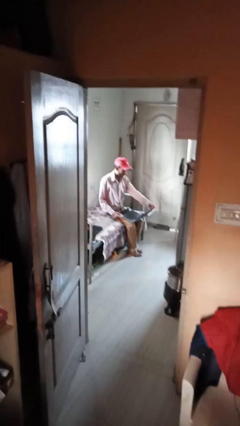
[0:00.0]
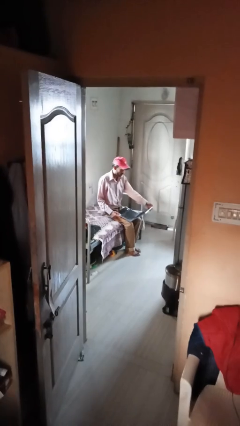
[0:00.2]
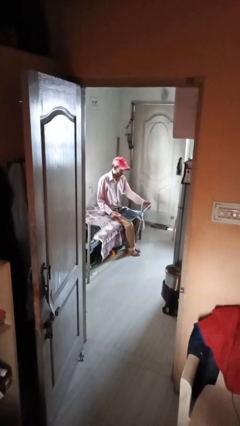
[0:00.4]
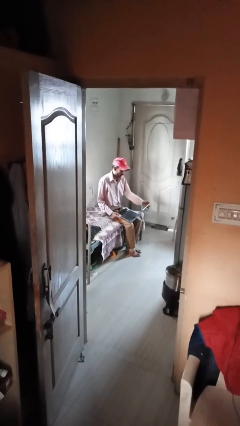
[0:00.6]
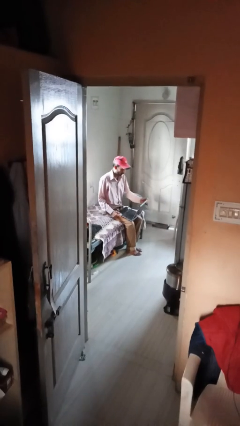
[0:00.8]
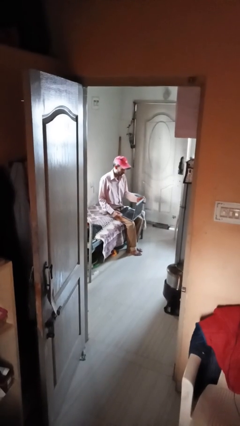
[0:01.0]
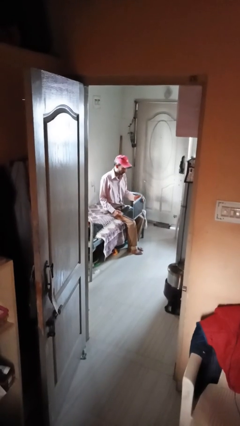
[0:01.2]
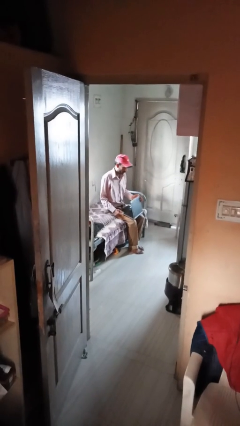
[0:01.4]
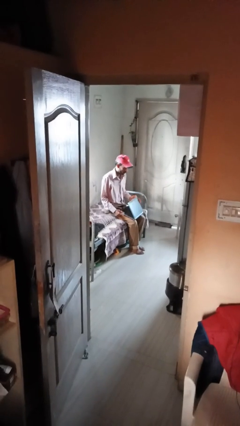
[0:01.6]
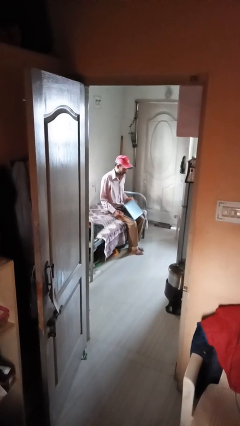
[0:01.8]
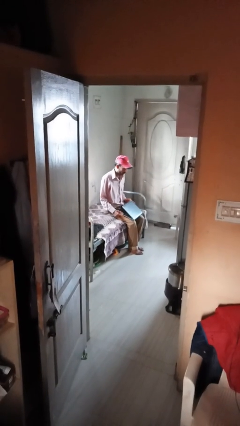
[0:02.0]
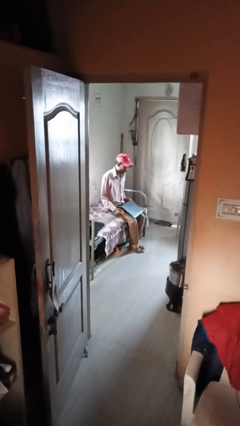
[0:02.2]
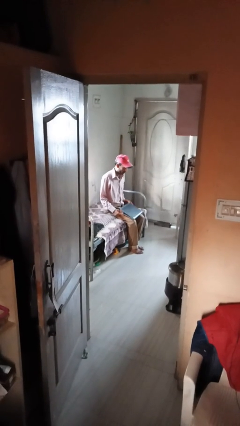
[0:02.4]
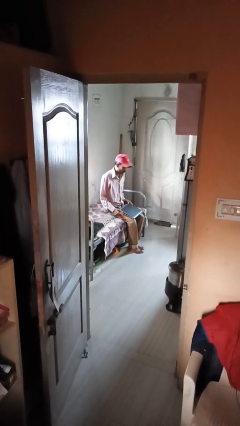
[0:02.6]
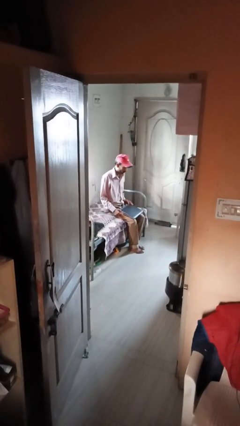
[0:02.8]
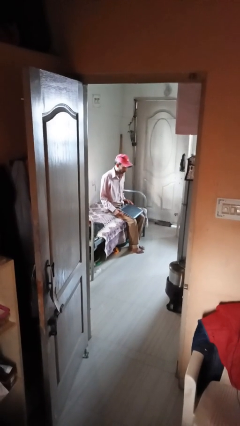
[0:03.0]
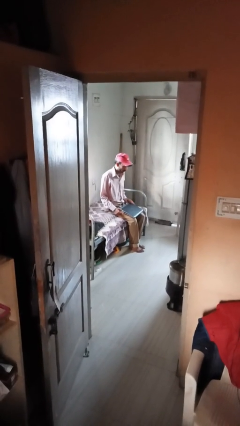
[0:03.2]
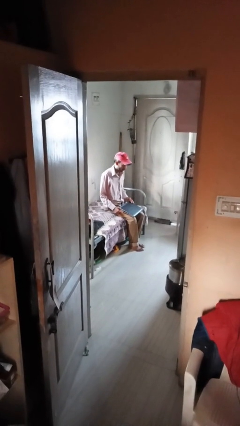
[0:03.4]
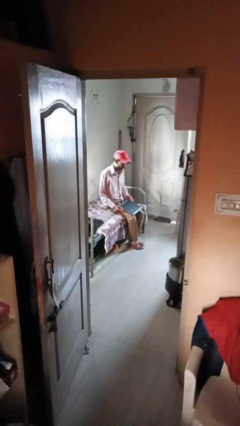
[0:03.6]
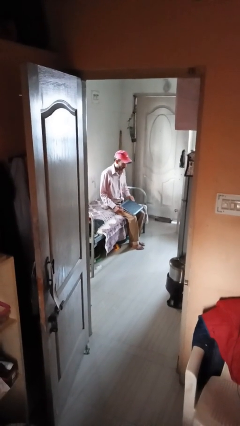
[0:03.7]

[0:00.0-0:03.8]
person closes laptop

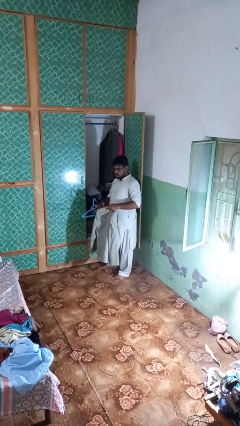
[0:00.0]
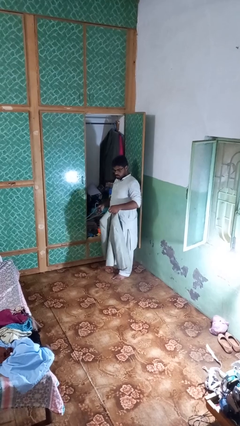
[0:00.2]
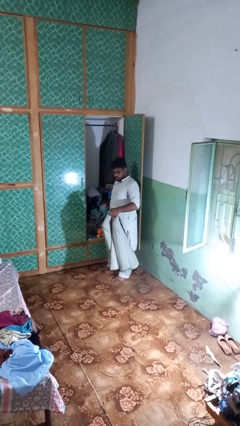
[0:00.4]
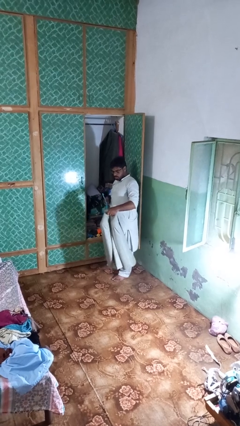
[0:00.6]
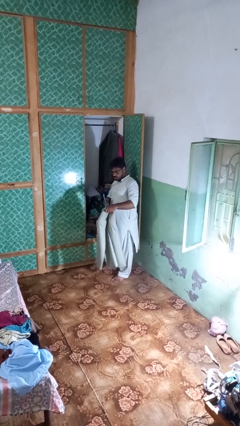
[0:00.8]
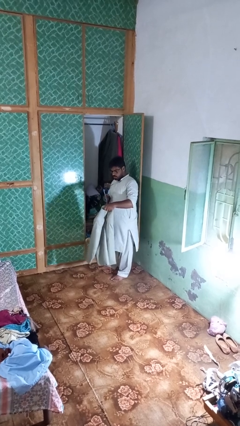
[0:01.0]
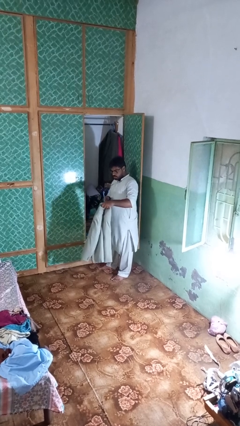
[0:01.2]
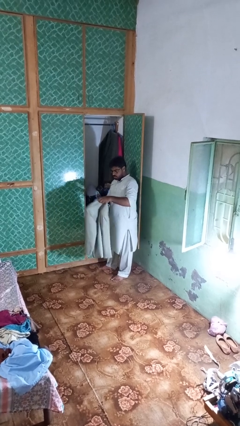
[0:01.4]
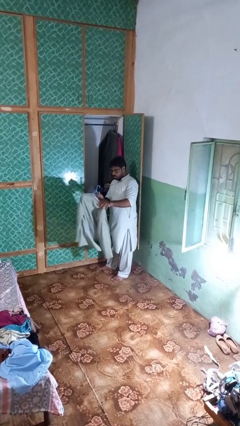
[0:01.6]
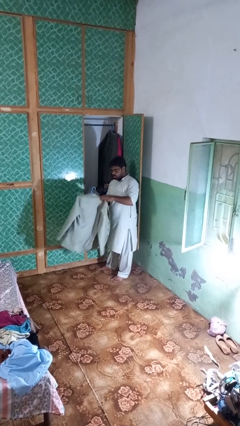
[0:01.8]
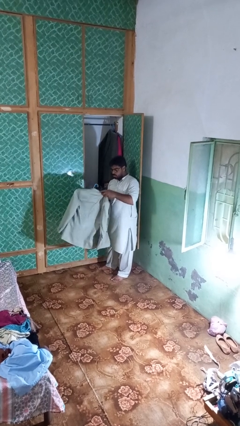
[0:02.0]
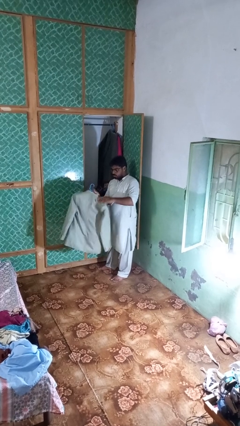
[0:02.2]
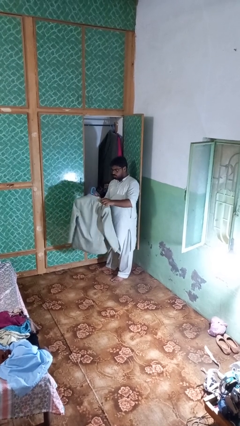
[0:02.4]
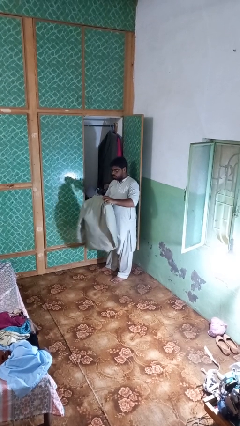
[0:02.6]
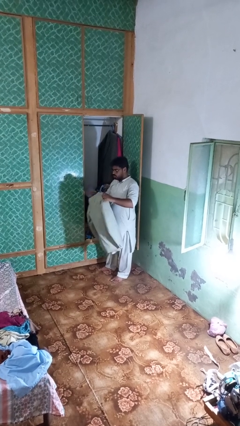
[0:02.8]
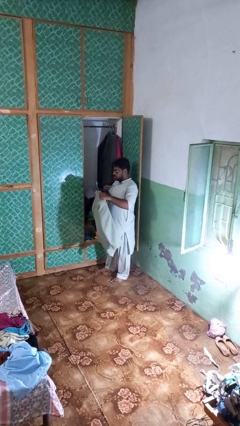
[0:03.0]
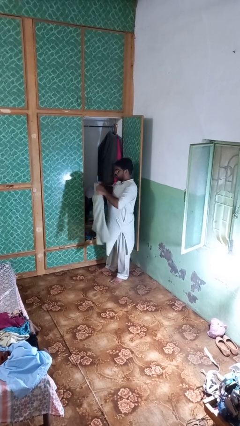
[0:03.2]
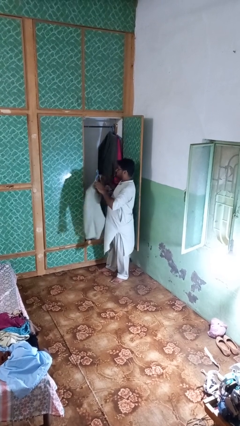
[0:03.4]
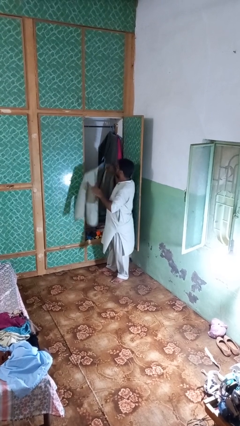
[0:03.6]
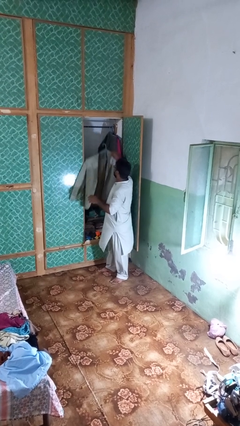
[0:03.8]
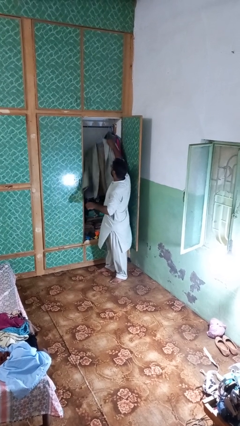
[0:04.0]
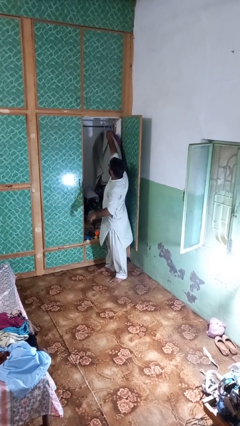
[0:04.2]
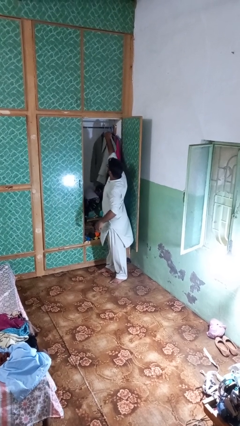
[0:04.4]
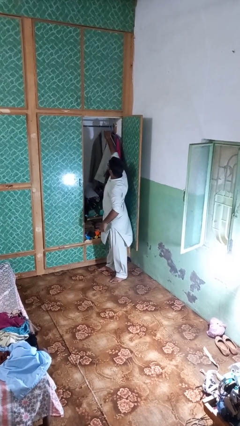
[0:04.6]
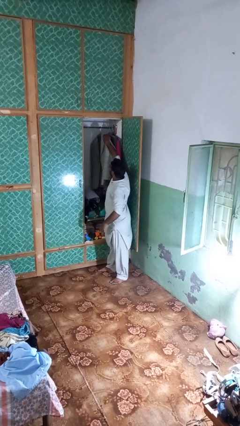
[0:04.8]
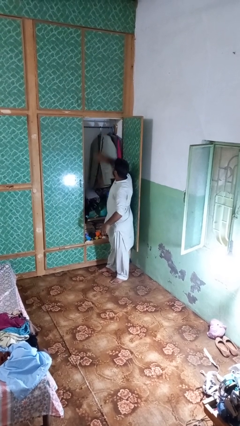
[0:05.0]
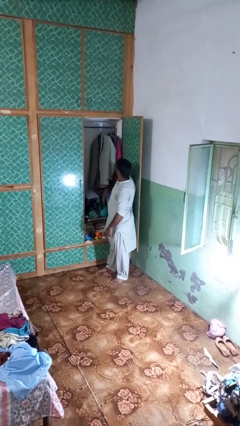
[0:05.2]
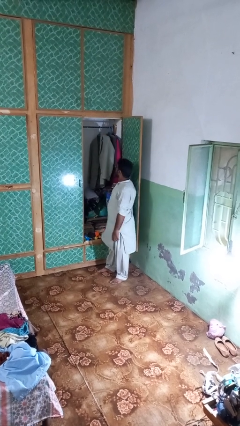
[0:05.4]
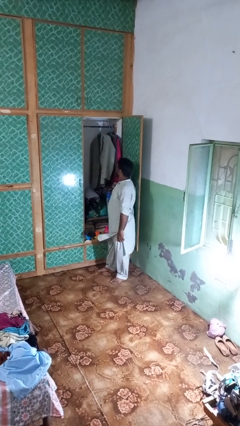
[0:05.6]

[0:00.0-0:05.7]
person puts clothes into closet

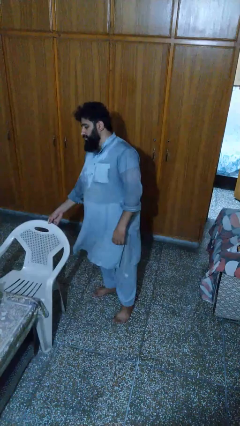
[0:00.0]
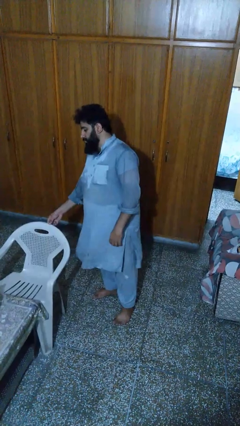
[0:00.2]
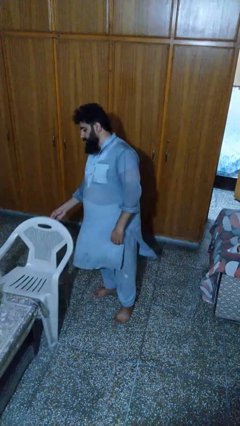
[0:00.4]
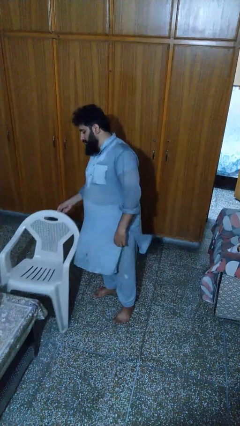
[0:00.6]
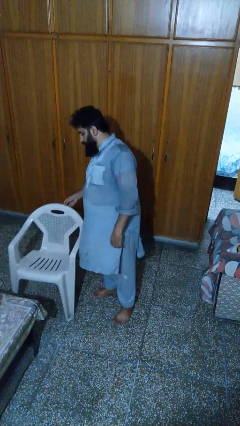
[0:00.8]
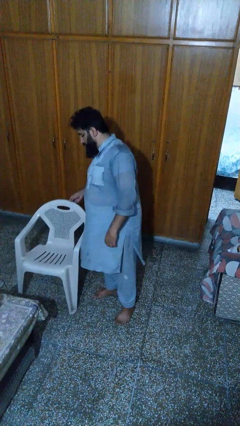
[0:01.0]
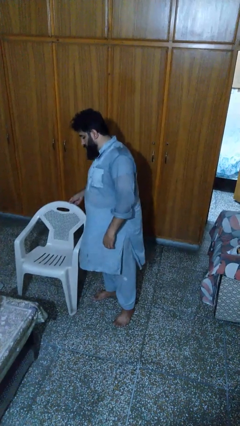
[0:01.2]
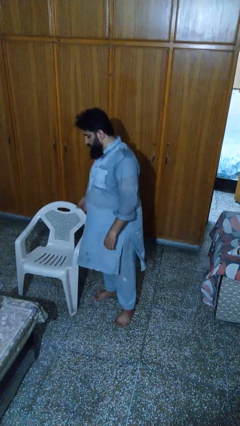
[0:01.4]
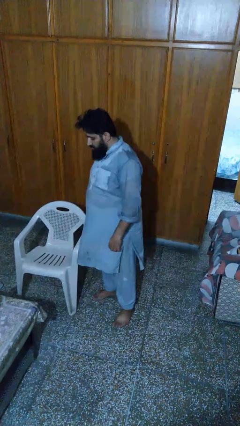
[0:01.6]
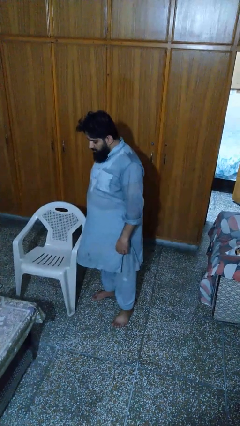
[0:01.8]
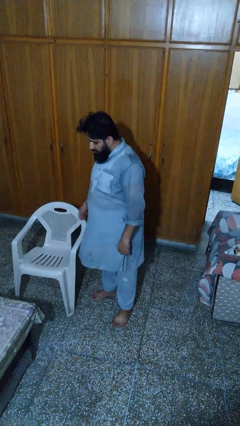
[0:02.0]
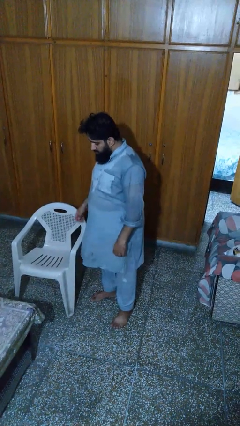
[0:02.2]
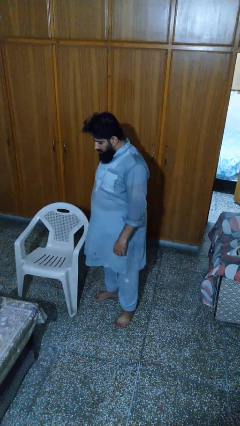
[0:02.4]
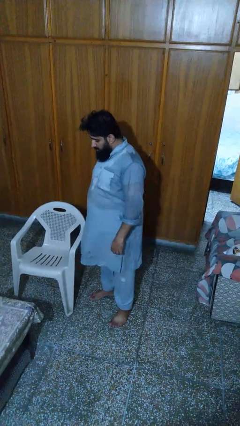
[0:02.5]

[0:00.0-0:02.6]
person pulls out chair

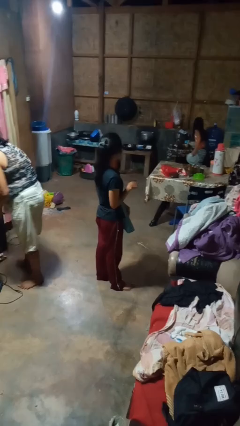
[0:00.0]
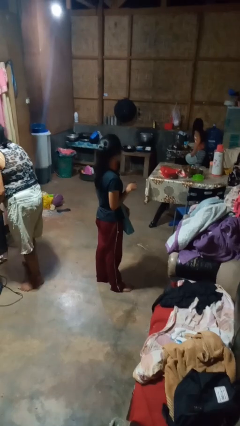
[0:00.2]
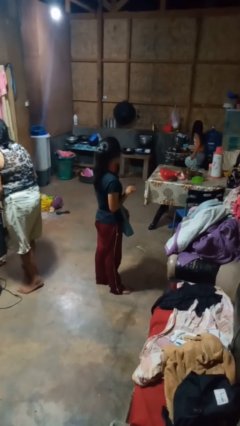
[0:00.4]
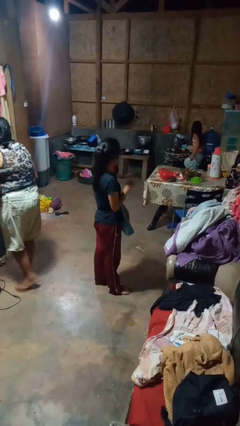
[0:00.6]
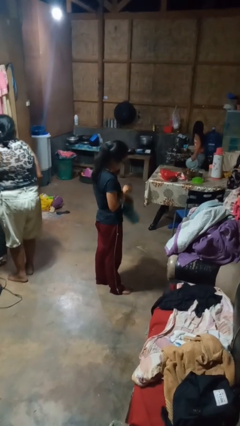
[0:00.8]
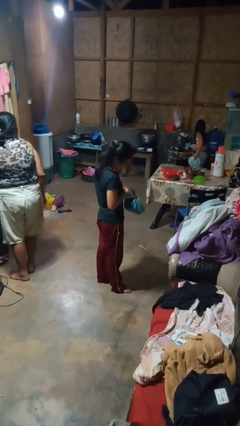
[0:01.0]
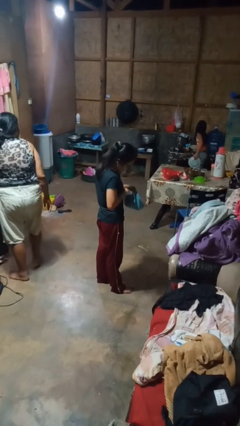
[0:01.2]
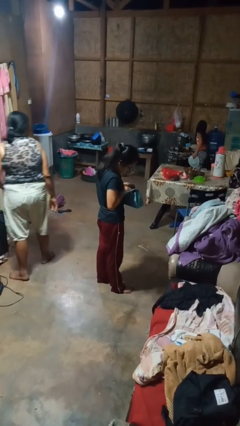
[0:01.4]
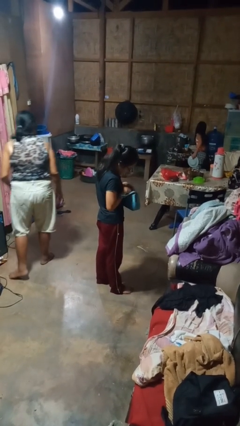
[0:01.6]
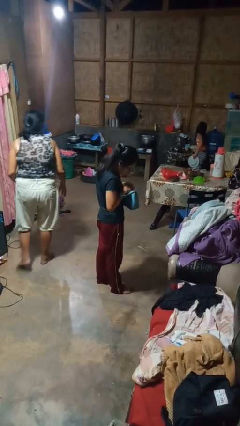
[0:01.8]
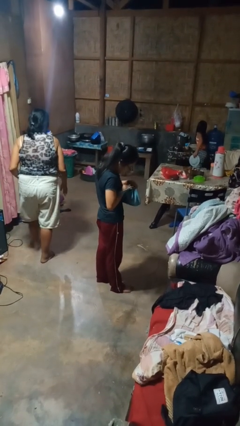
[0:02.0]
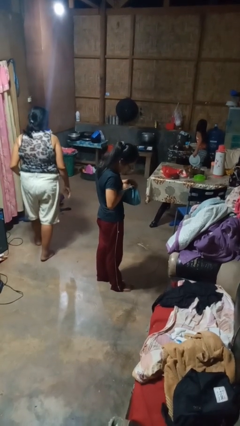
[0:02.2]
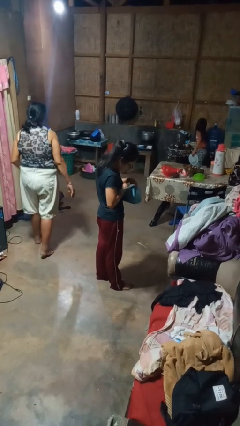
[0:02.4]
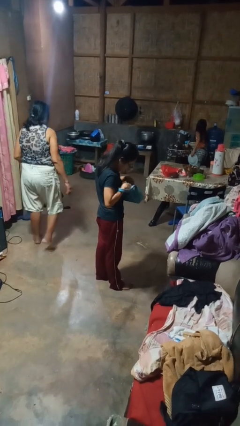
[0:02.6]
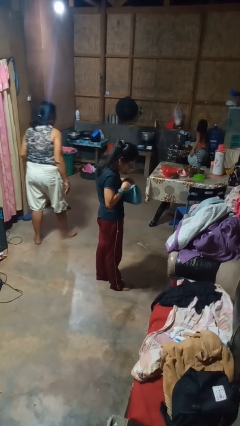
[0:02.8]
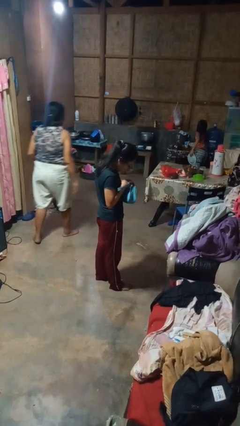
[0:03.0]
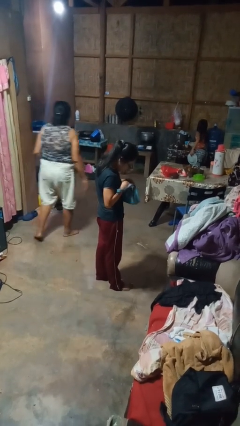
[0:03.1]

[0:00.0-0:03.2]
person searches in purse

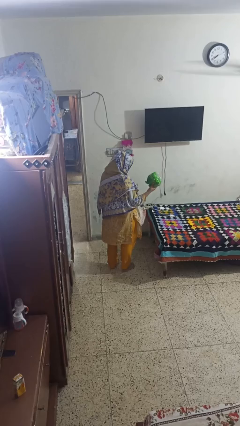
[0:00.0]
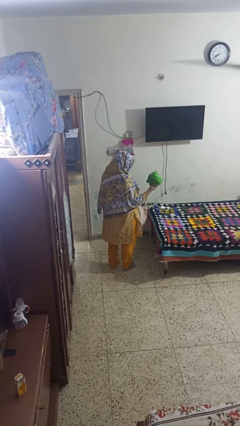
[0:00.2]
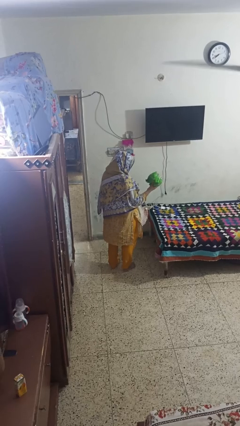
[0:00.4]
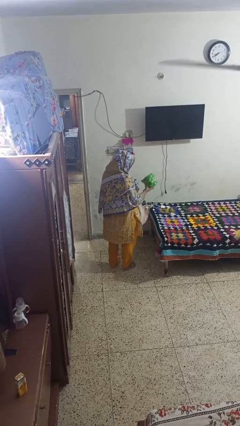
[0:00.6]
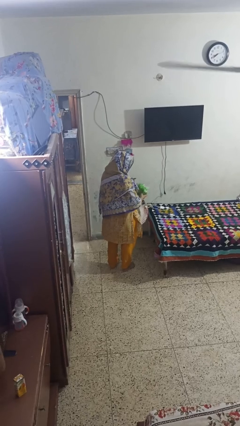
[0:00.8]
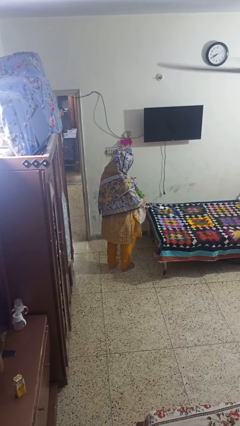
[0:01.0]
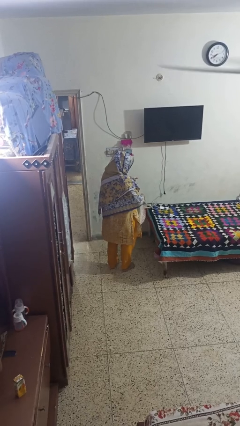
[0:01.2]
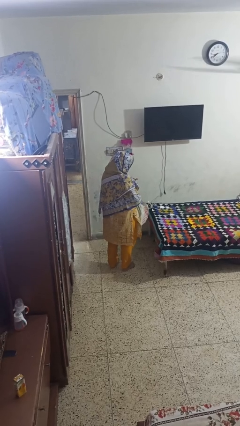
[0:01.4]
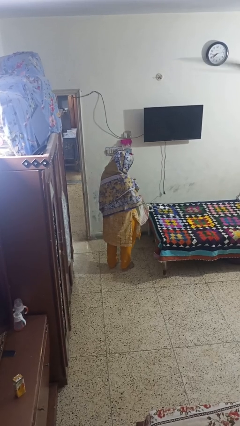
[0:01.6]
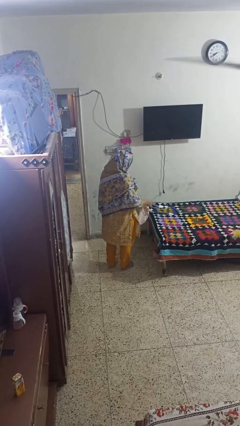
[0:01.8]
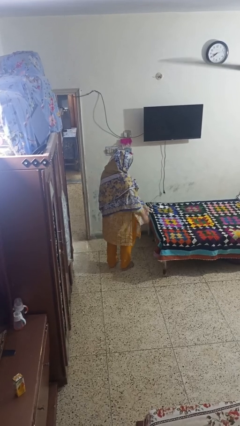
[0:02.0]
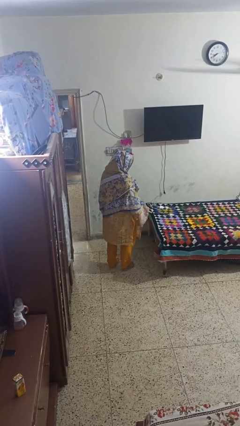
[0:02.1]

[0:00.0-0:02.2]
person puts object into bag

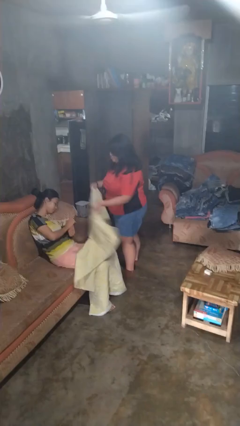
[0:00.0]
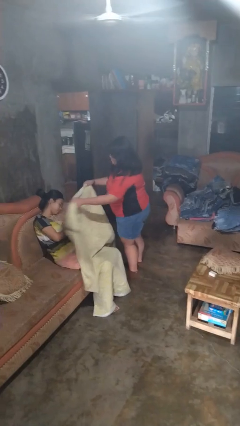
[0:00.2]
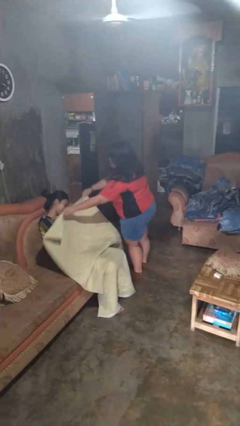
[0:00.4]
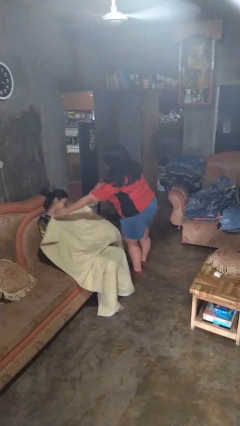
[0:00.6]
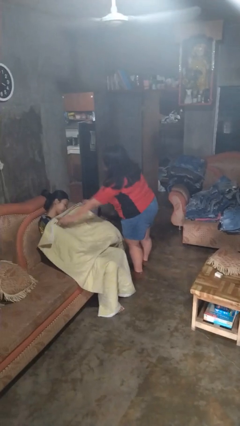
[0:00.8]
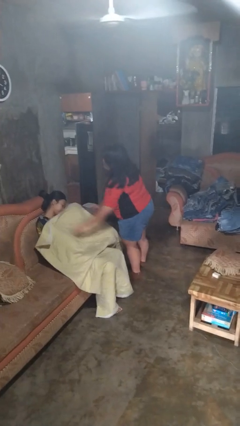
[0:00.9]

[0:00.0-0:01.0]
person covers friend with blanket
